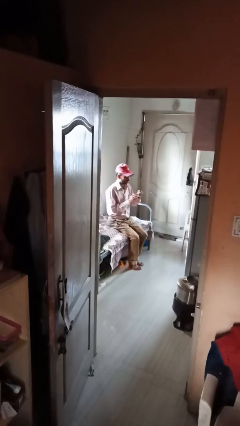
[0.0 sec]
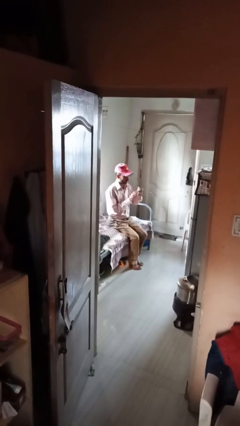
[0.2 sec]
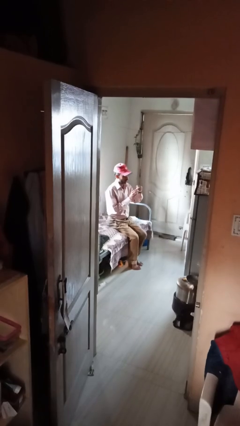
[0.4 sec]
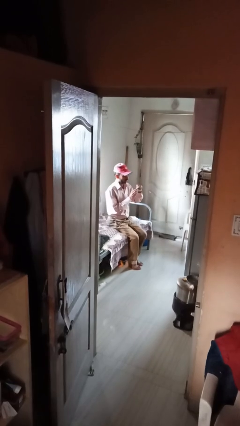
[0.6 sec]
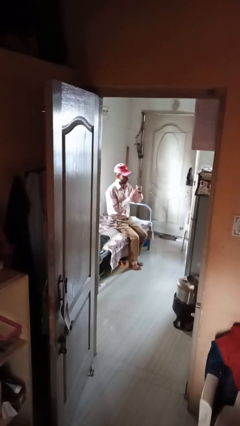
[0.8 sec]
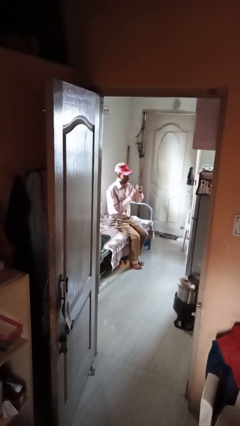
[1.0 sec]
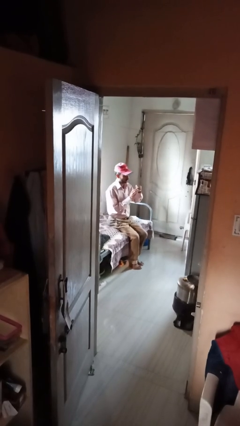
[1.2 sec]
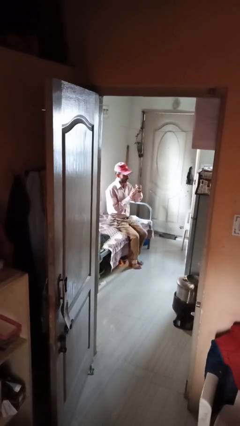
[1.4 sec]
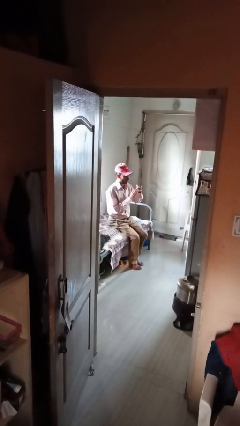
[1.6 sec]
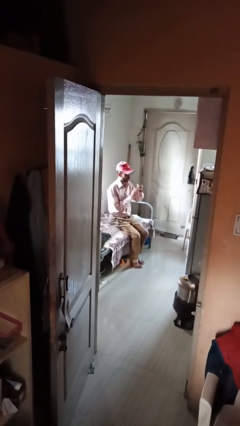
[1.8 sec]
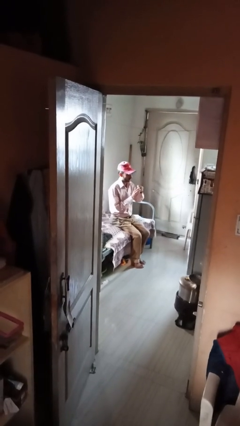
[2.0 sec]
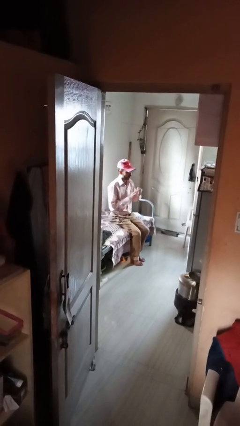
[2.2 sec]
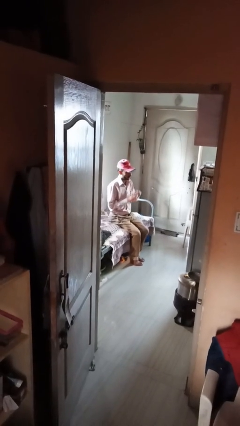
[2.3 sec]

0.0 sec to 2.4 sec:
person files fingernails

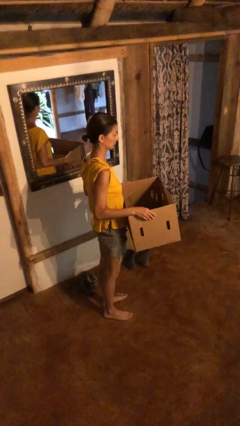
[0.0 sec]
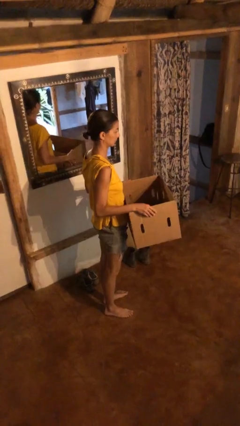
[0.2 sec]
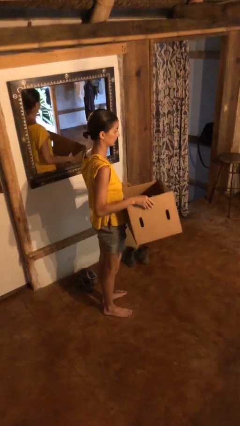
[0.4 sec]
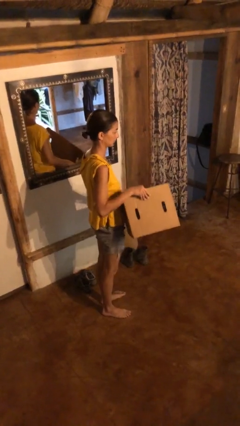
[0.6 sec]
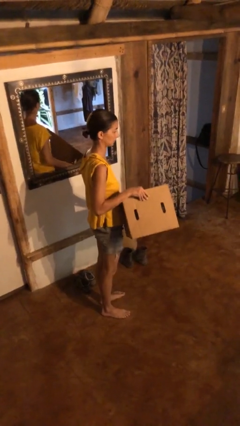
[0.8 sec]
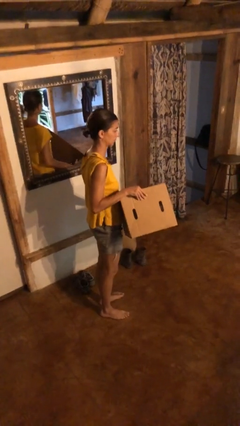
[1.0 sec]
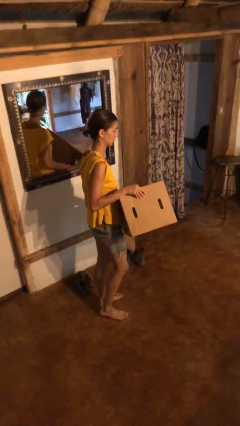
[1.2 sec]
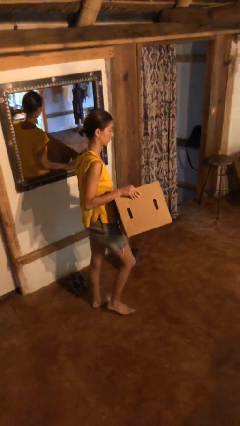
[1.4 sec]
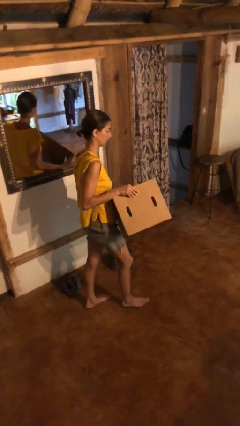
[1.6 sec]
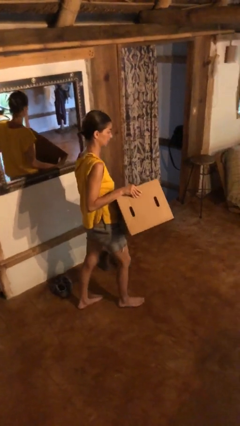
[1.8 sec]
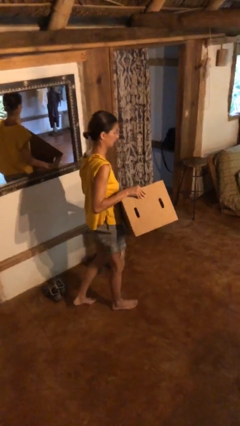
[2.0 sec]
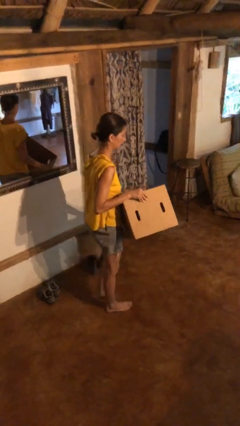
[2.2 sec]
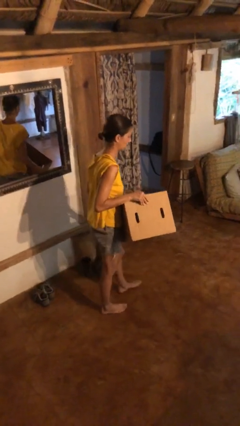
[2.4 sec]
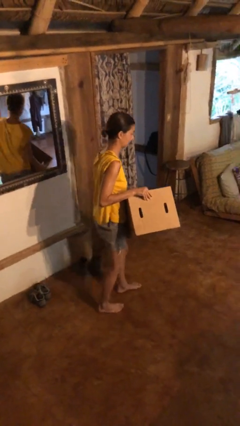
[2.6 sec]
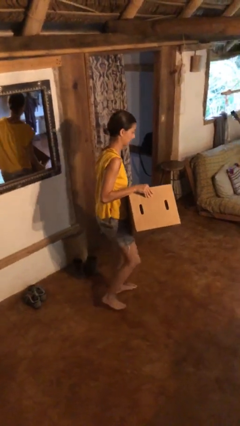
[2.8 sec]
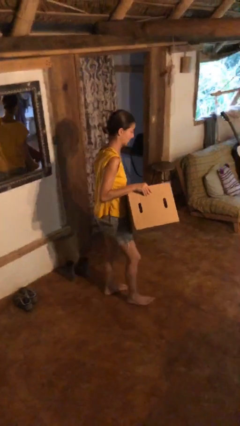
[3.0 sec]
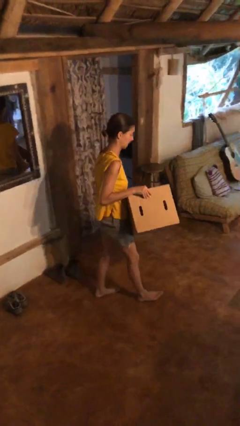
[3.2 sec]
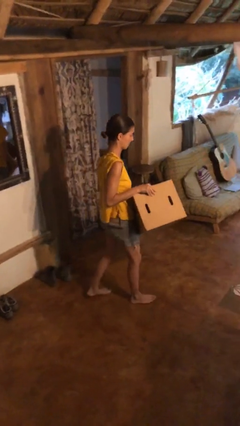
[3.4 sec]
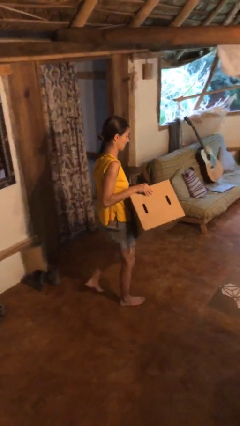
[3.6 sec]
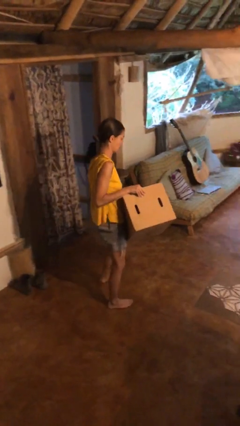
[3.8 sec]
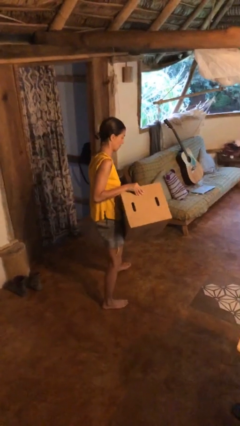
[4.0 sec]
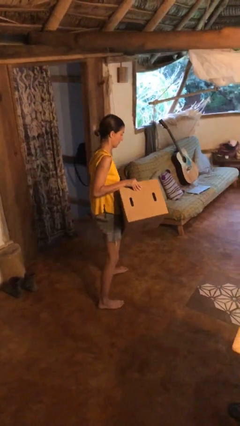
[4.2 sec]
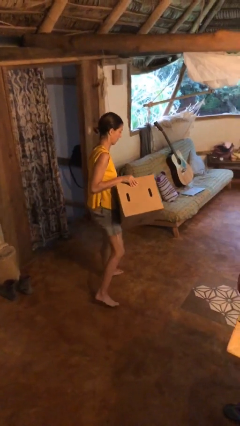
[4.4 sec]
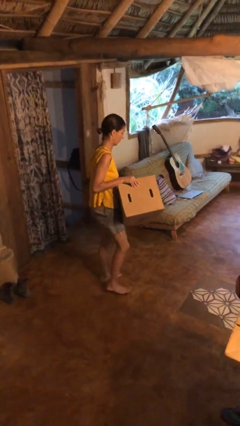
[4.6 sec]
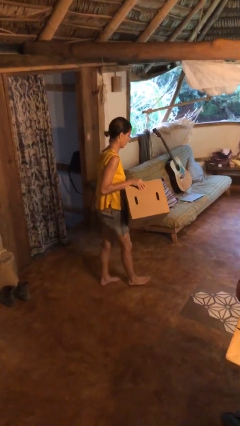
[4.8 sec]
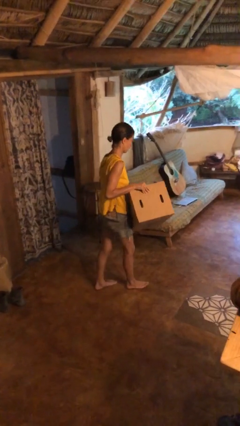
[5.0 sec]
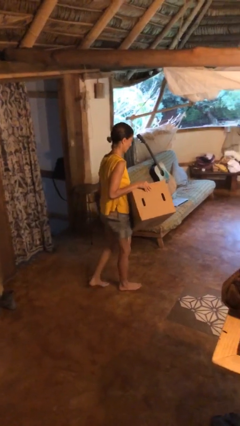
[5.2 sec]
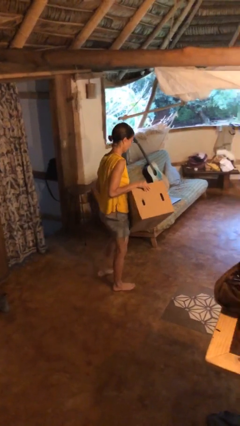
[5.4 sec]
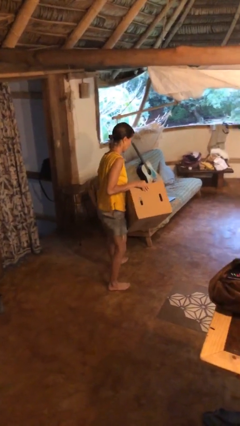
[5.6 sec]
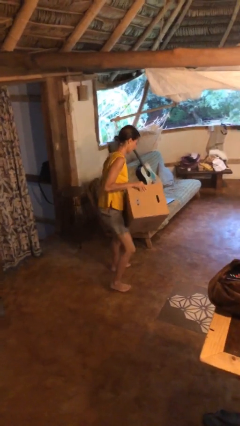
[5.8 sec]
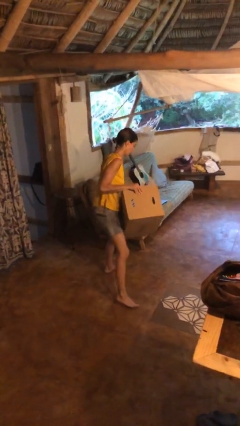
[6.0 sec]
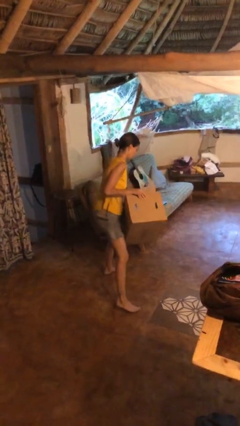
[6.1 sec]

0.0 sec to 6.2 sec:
person carries heavy object

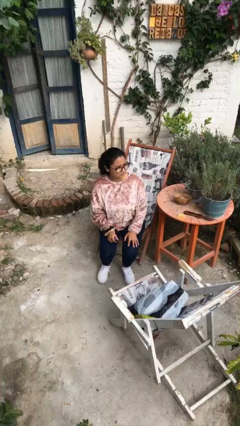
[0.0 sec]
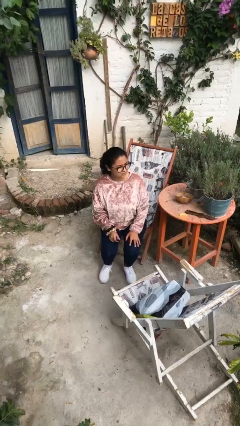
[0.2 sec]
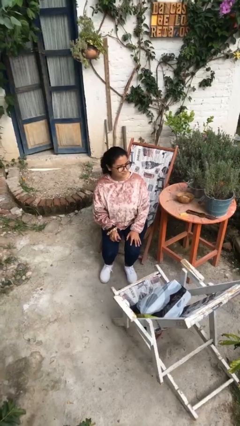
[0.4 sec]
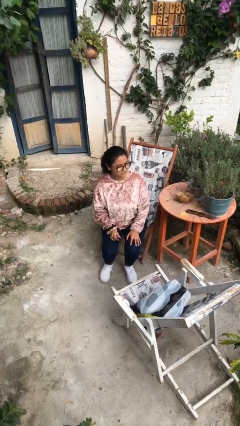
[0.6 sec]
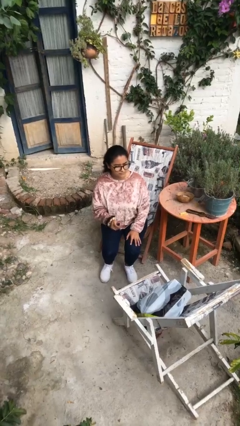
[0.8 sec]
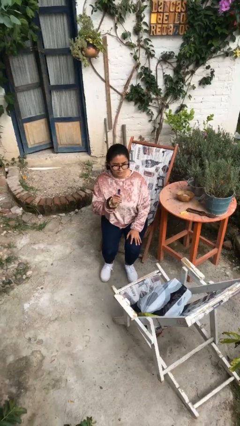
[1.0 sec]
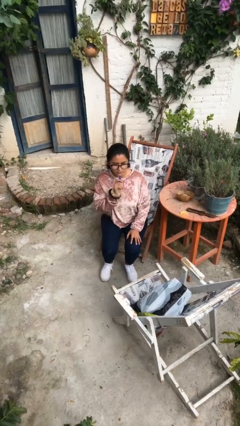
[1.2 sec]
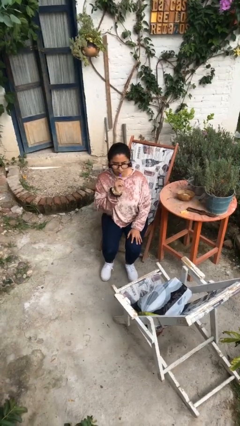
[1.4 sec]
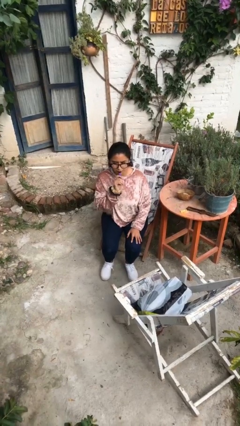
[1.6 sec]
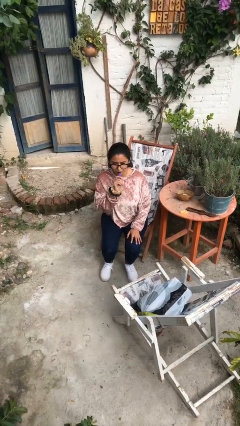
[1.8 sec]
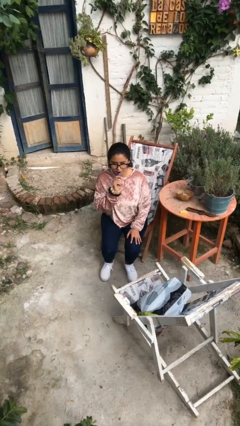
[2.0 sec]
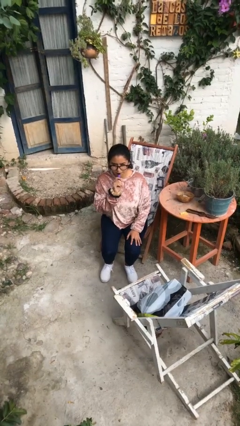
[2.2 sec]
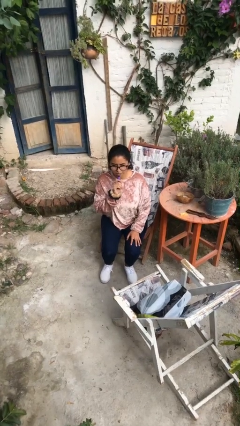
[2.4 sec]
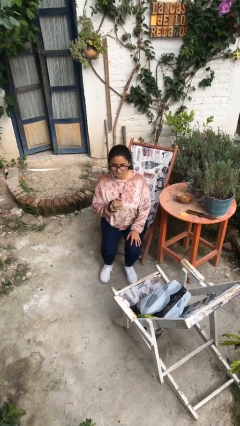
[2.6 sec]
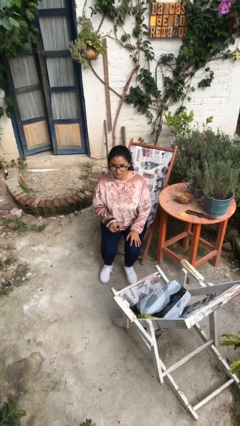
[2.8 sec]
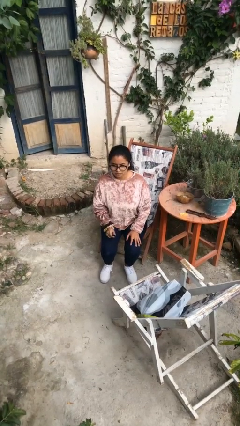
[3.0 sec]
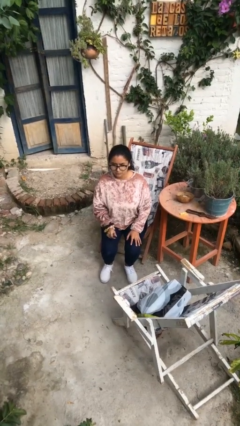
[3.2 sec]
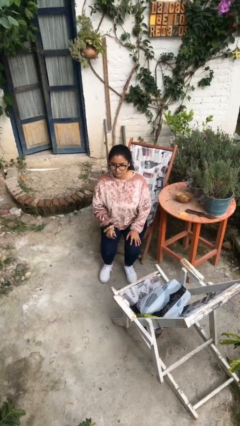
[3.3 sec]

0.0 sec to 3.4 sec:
person vapes

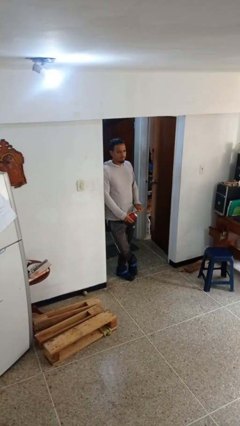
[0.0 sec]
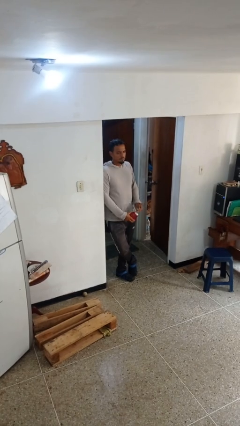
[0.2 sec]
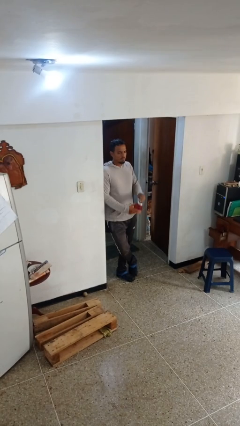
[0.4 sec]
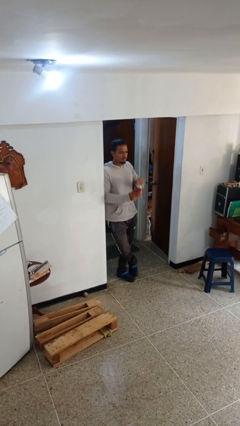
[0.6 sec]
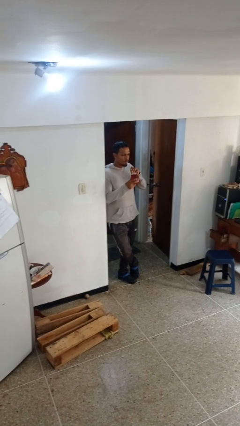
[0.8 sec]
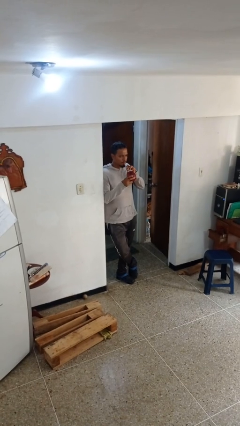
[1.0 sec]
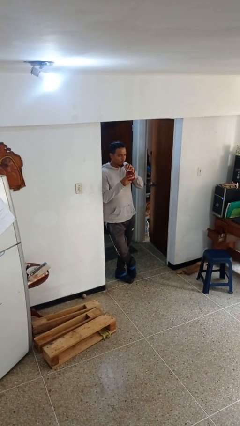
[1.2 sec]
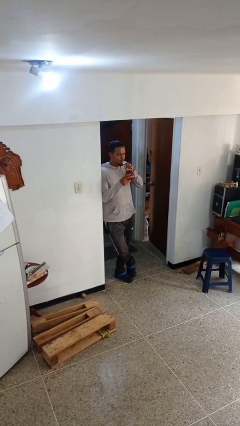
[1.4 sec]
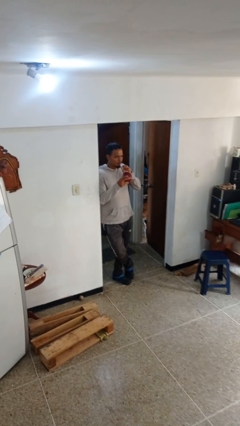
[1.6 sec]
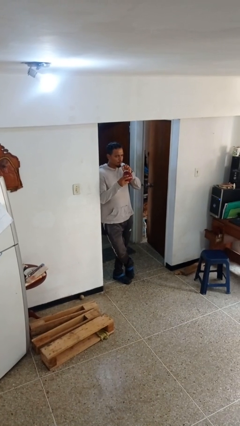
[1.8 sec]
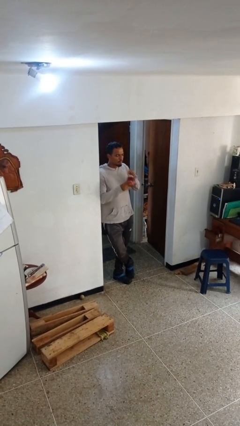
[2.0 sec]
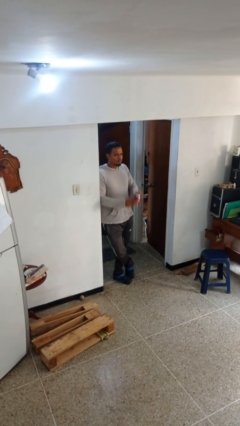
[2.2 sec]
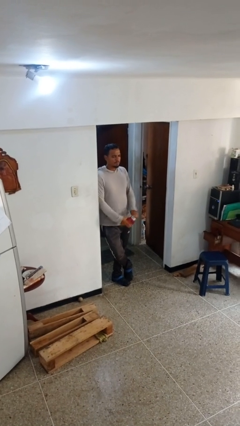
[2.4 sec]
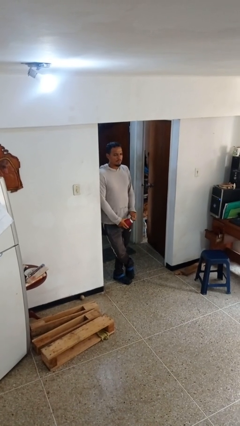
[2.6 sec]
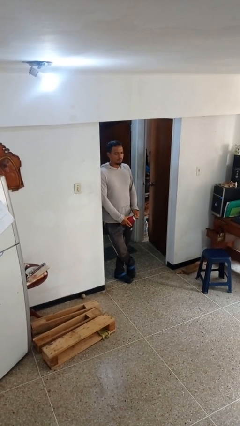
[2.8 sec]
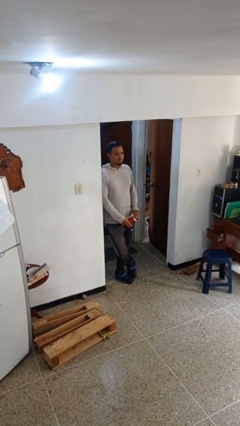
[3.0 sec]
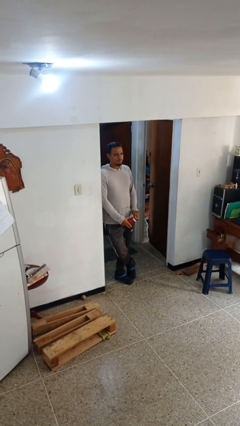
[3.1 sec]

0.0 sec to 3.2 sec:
person drinks from straw

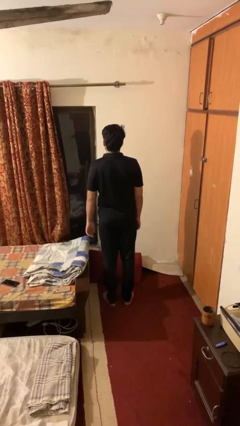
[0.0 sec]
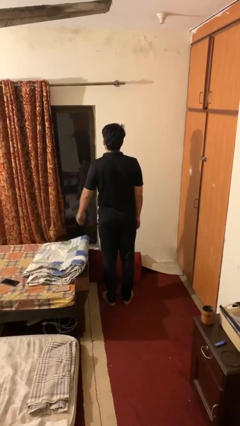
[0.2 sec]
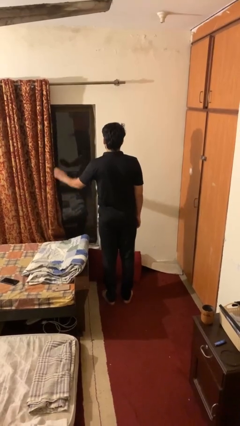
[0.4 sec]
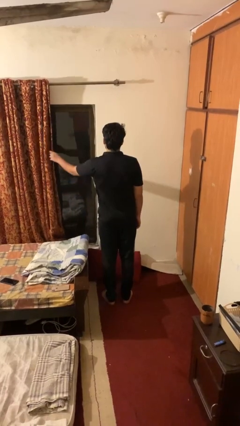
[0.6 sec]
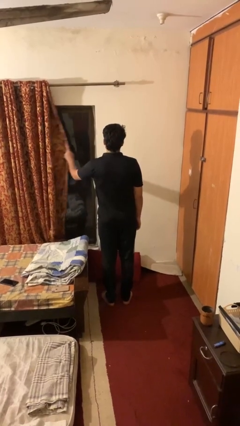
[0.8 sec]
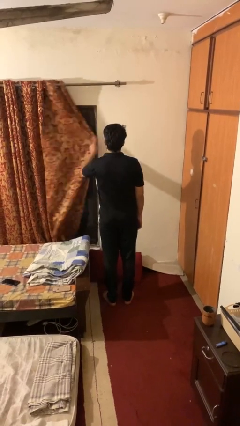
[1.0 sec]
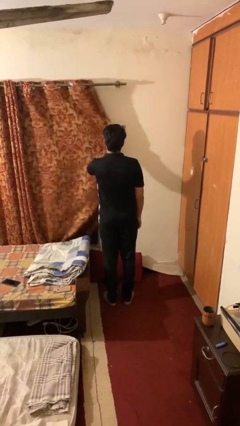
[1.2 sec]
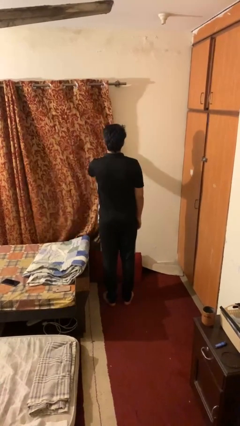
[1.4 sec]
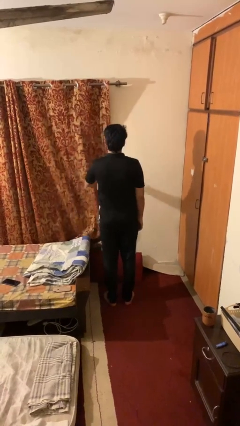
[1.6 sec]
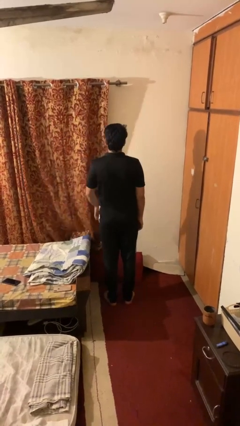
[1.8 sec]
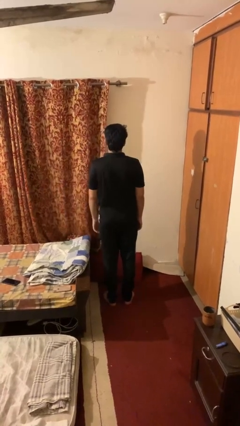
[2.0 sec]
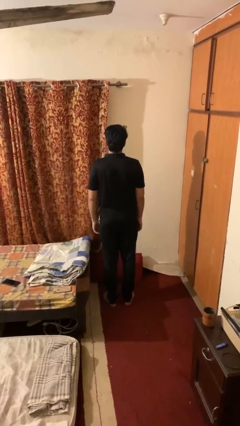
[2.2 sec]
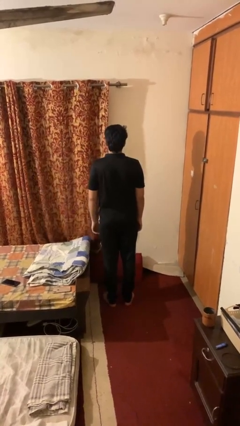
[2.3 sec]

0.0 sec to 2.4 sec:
person closes curtains
